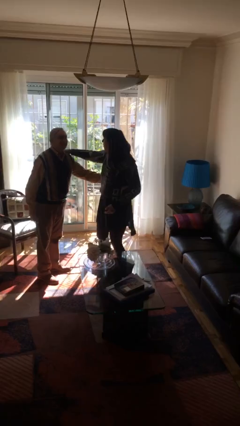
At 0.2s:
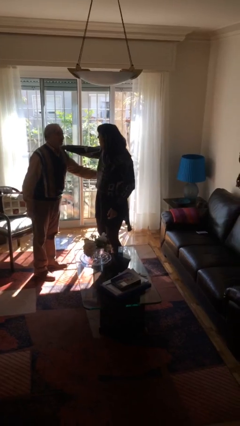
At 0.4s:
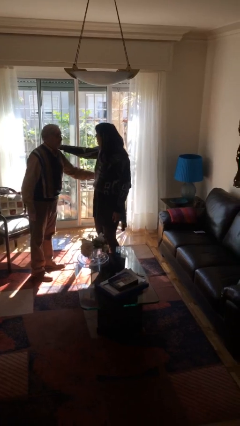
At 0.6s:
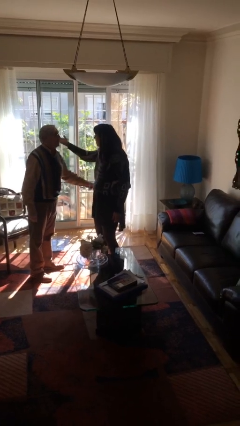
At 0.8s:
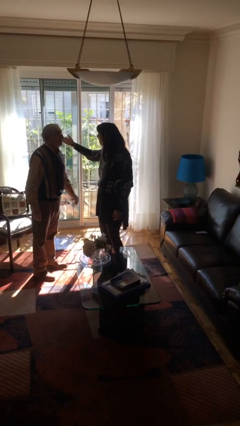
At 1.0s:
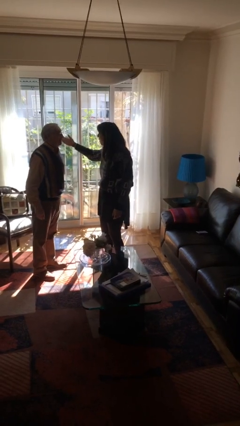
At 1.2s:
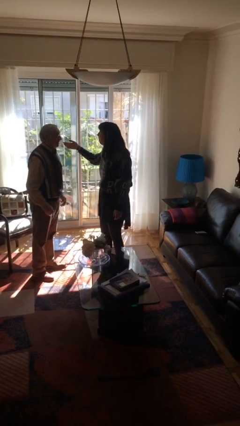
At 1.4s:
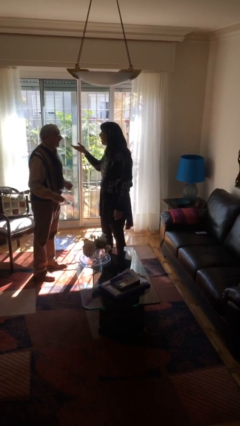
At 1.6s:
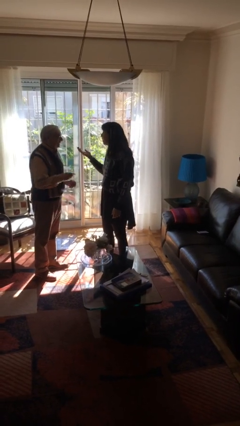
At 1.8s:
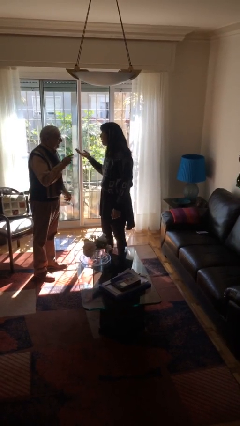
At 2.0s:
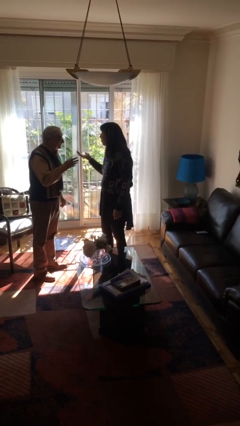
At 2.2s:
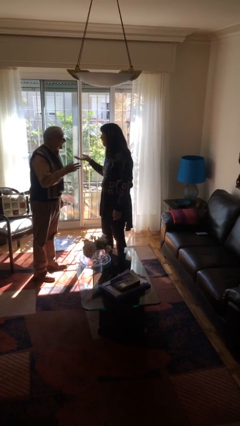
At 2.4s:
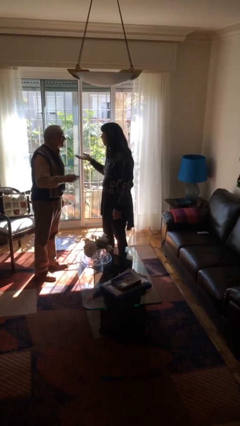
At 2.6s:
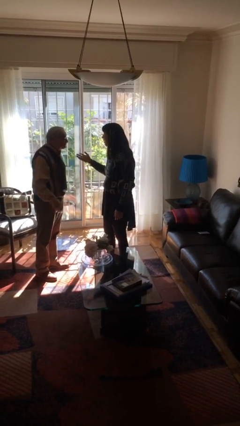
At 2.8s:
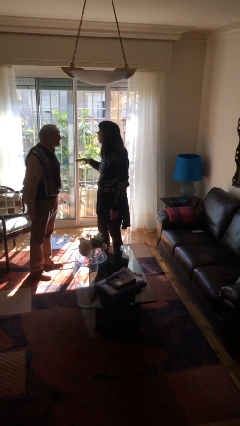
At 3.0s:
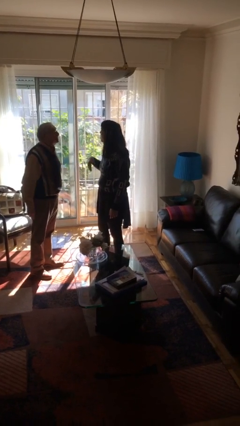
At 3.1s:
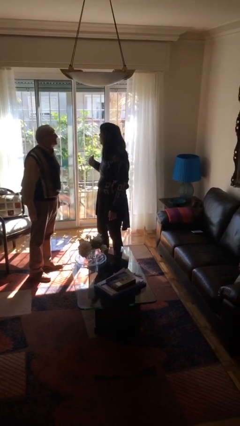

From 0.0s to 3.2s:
person talks to person

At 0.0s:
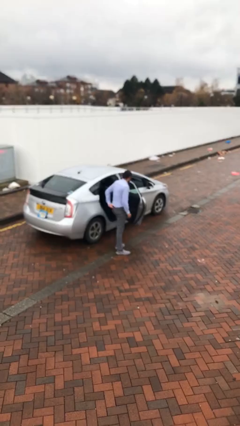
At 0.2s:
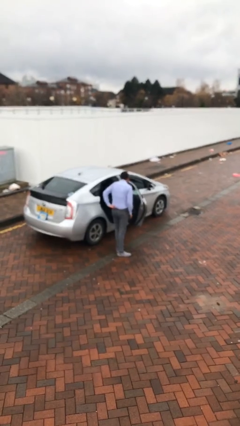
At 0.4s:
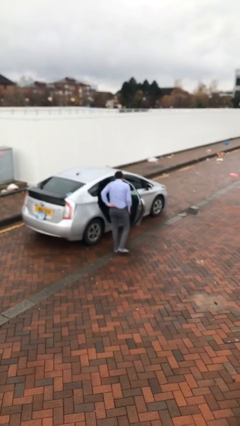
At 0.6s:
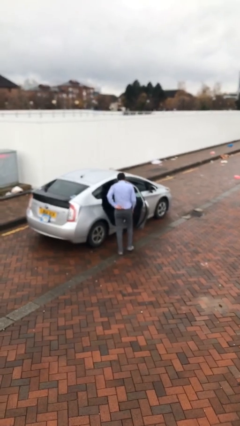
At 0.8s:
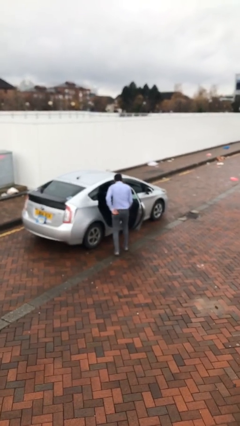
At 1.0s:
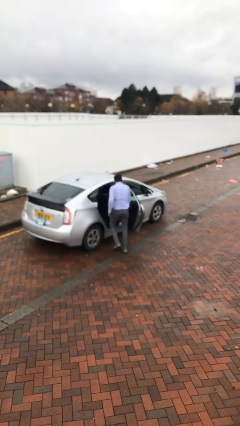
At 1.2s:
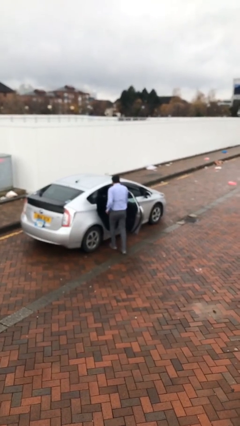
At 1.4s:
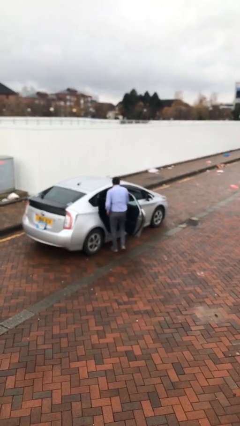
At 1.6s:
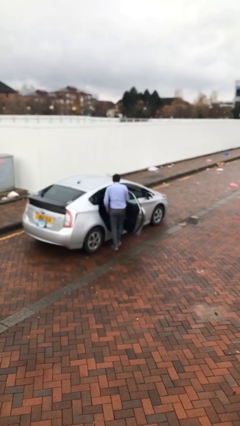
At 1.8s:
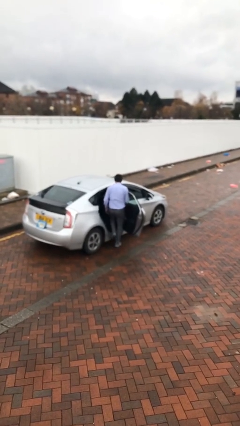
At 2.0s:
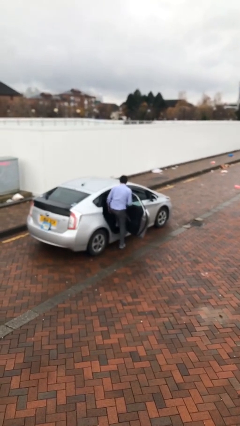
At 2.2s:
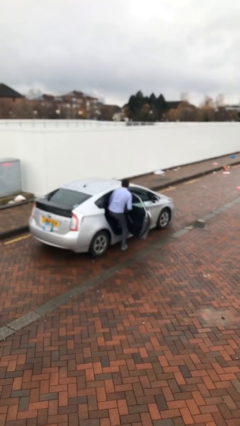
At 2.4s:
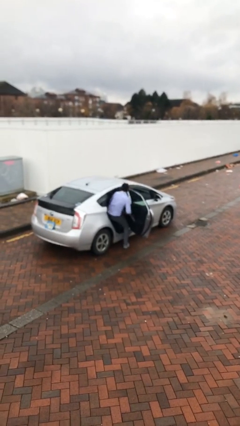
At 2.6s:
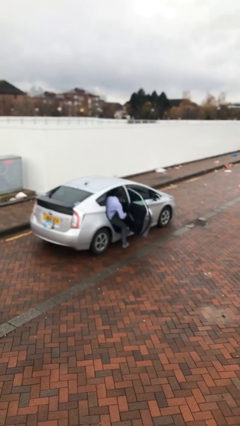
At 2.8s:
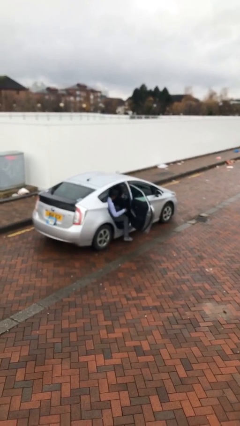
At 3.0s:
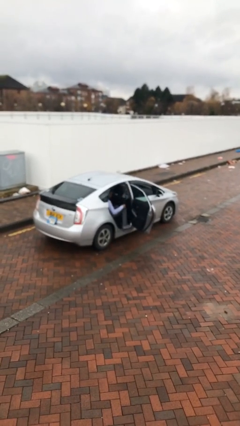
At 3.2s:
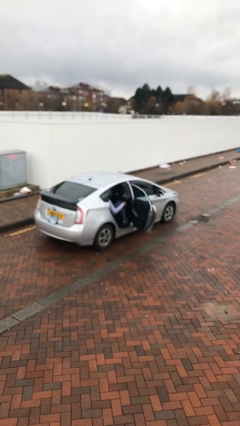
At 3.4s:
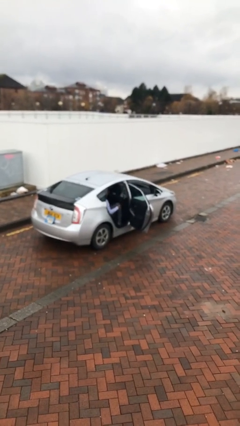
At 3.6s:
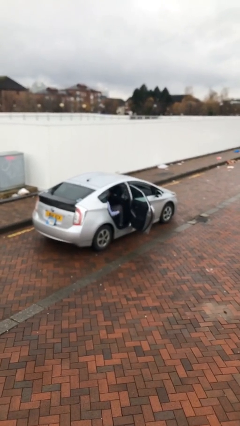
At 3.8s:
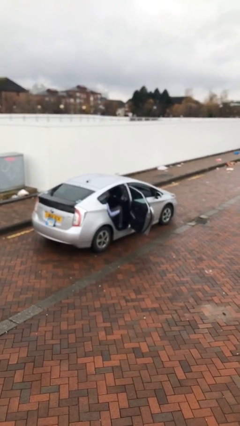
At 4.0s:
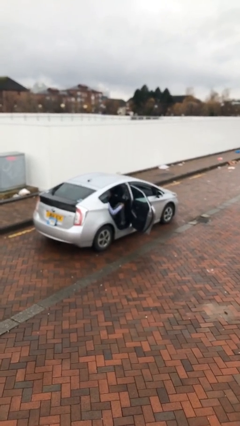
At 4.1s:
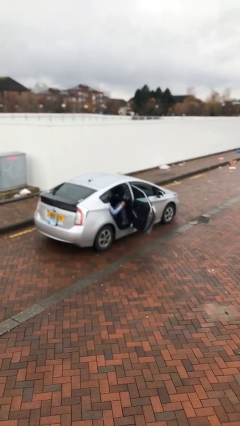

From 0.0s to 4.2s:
person enters car

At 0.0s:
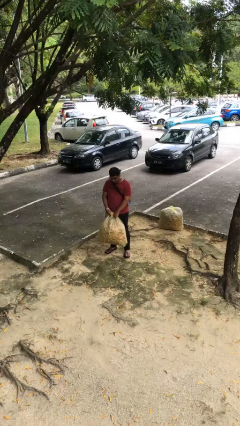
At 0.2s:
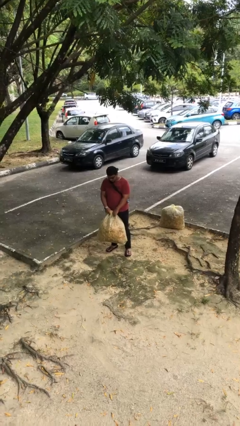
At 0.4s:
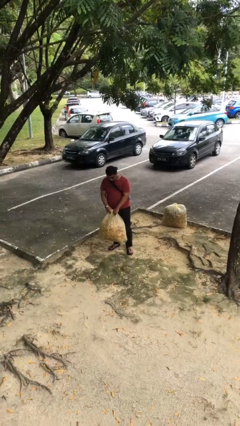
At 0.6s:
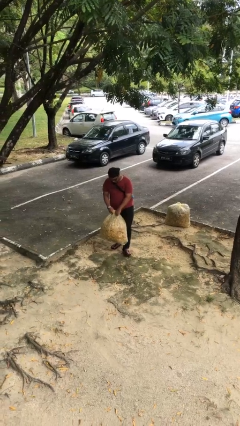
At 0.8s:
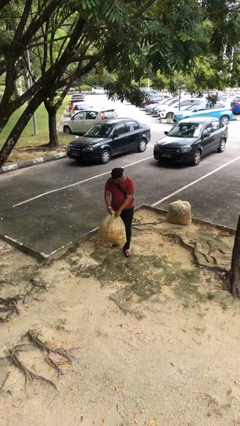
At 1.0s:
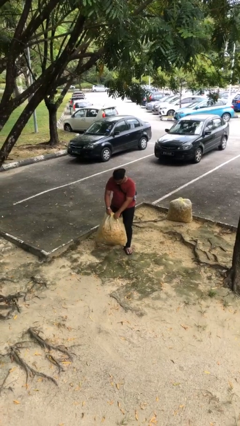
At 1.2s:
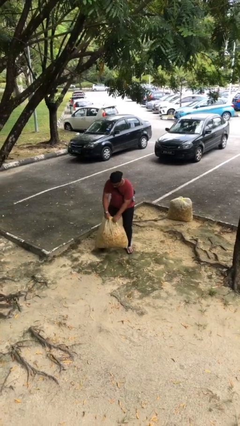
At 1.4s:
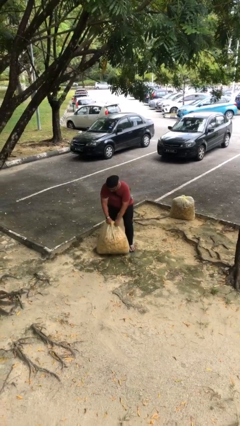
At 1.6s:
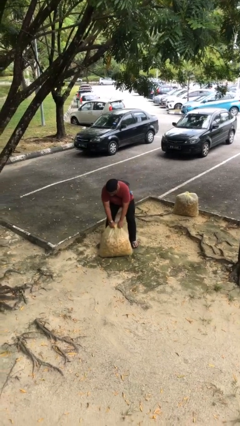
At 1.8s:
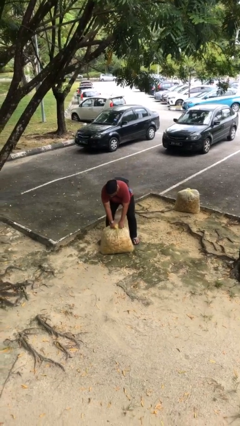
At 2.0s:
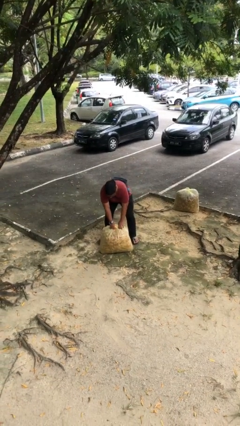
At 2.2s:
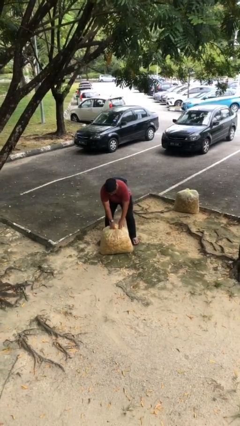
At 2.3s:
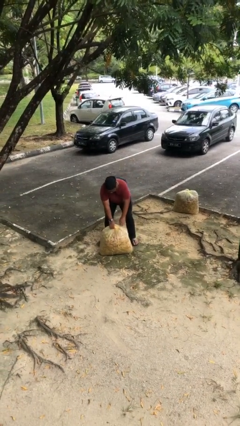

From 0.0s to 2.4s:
person puts down object on floor

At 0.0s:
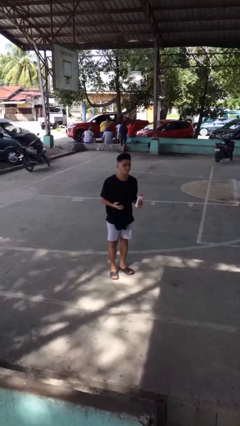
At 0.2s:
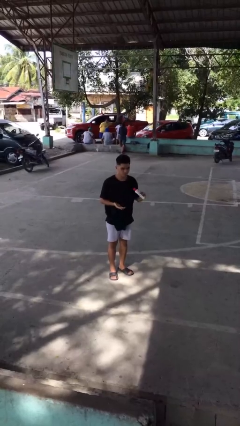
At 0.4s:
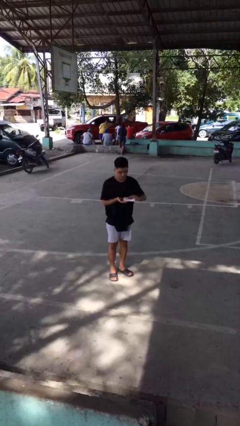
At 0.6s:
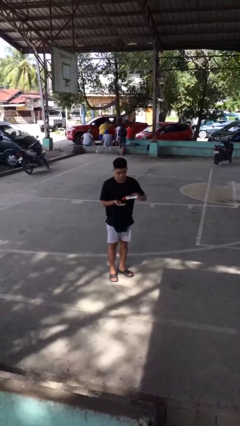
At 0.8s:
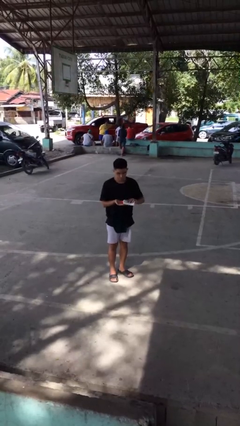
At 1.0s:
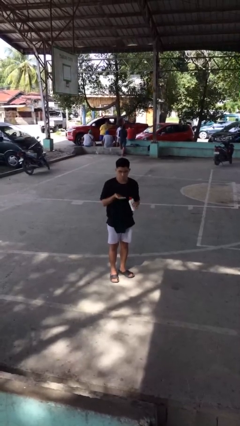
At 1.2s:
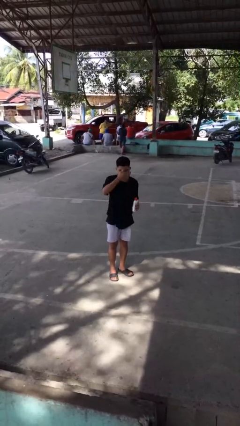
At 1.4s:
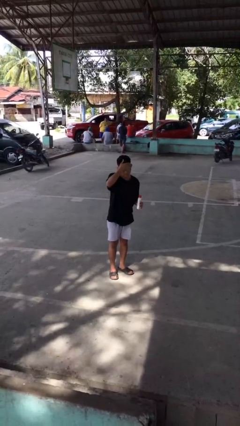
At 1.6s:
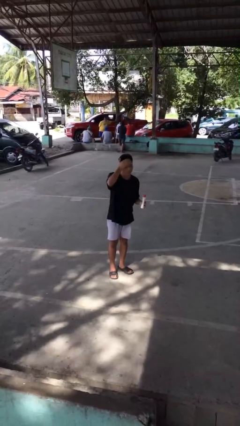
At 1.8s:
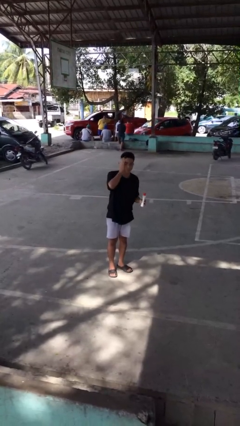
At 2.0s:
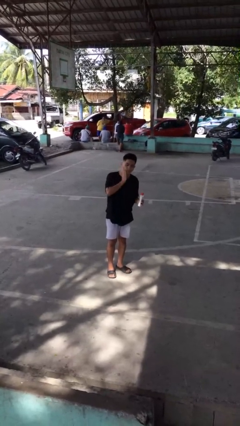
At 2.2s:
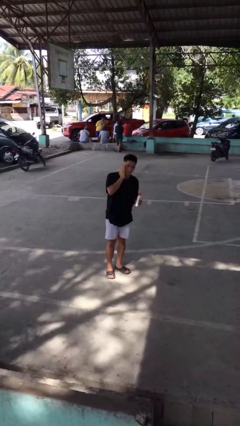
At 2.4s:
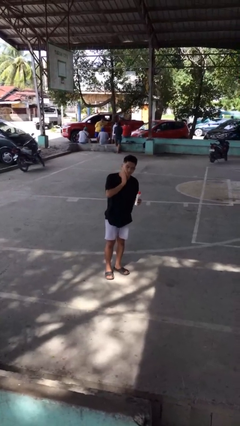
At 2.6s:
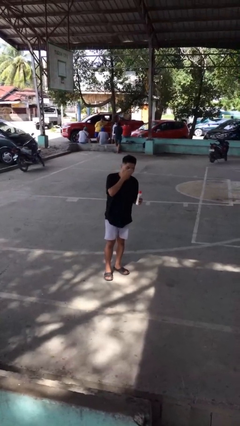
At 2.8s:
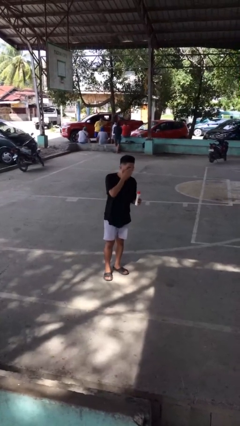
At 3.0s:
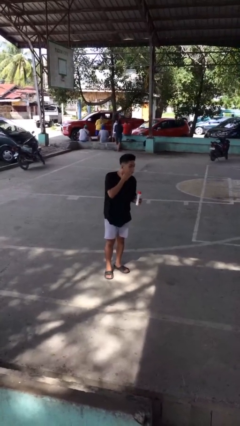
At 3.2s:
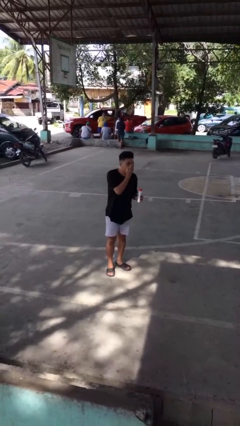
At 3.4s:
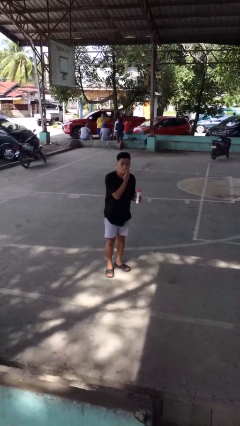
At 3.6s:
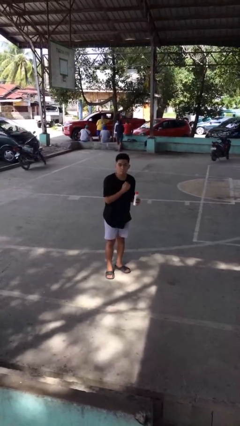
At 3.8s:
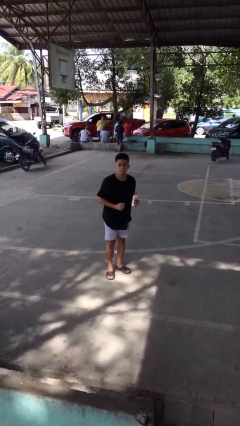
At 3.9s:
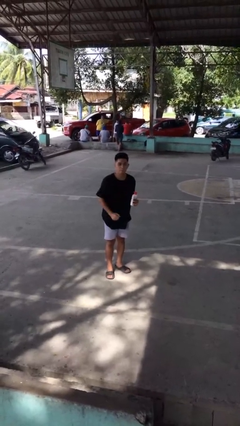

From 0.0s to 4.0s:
person applies facial moisturizer

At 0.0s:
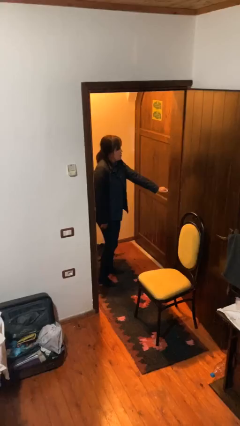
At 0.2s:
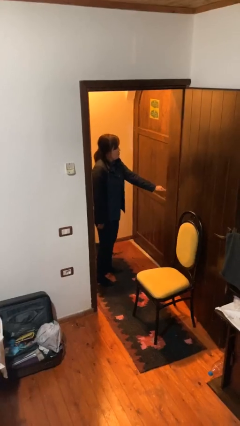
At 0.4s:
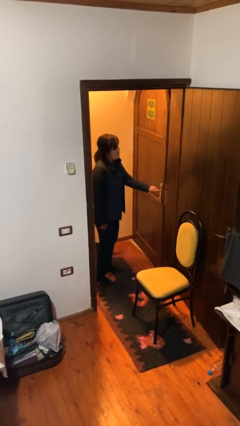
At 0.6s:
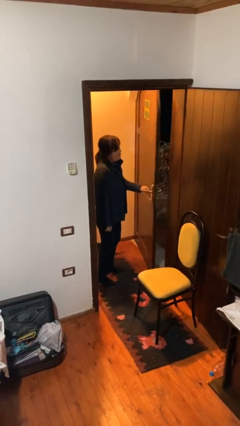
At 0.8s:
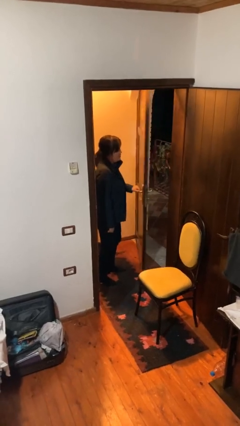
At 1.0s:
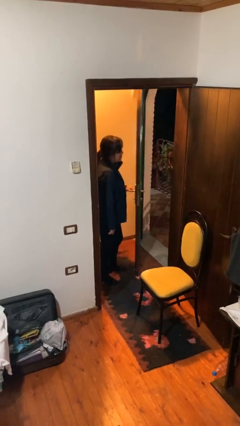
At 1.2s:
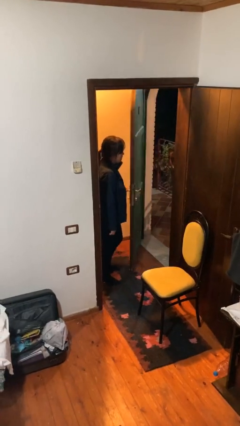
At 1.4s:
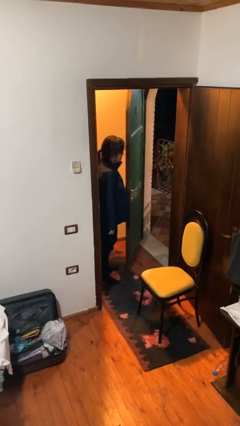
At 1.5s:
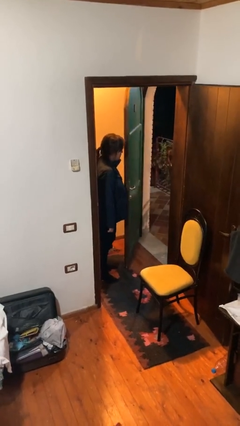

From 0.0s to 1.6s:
person opens facility door

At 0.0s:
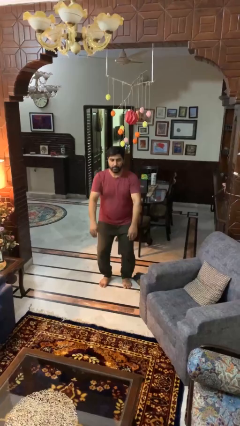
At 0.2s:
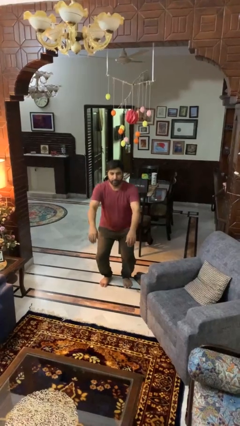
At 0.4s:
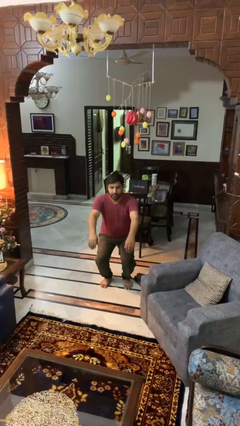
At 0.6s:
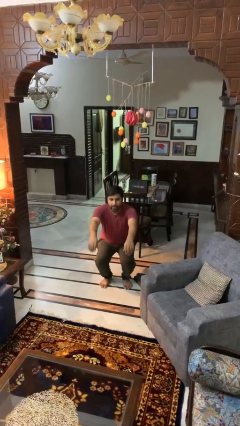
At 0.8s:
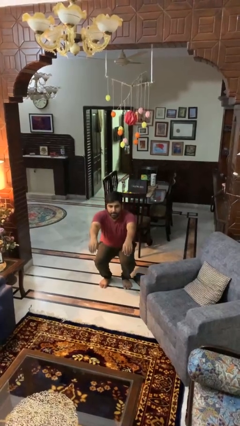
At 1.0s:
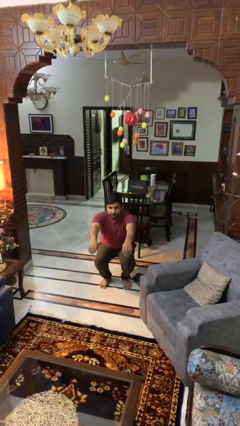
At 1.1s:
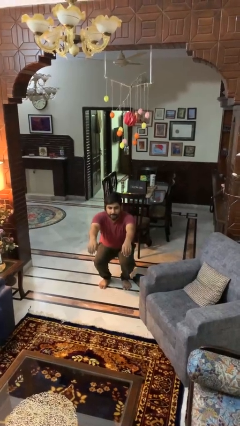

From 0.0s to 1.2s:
person squats

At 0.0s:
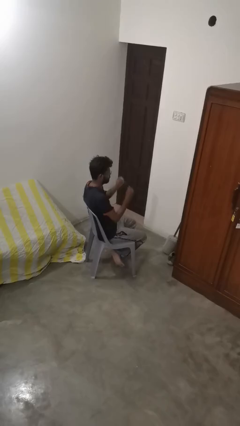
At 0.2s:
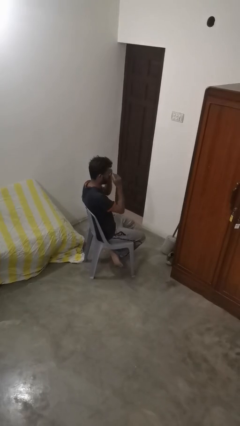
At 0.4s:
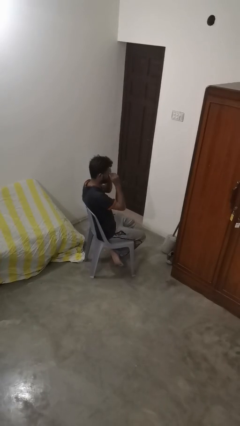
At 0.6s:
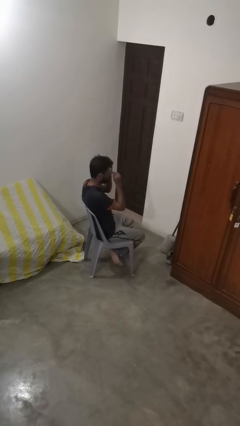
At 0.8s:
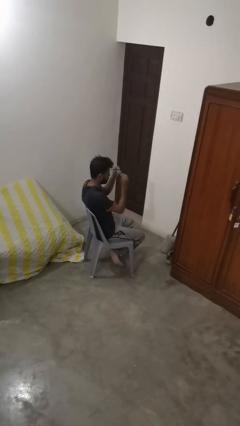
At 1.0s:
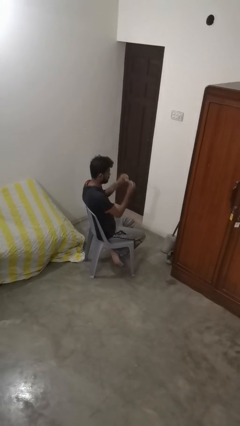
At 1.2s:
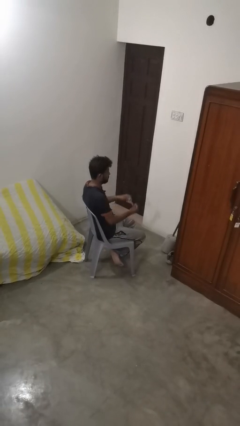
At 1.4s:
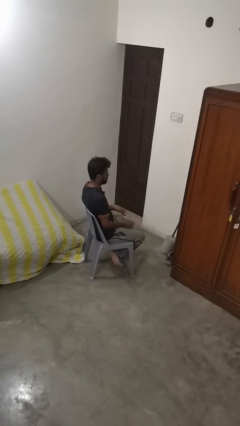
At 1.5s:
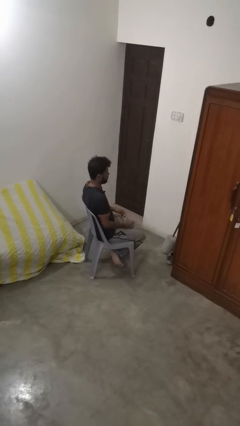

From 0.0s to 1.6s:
person takes off glasses
